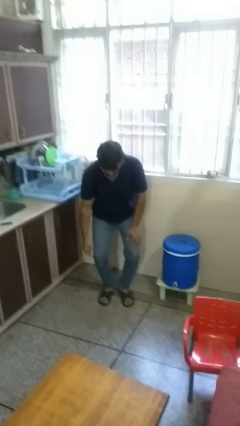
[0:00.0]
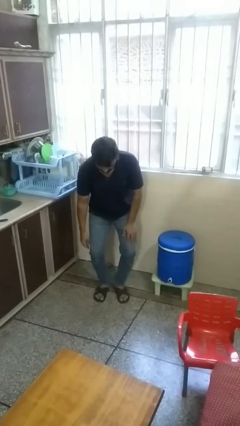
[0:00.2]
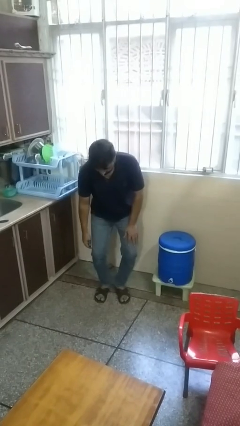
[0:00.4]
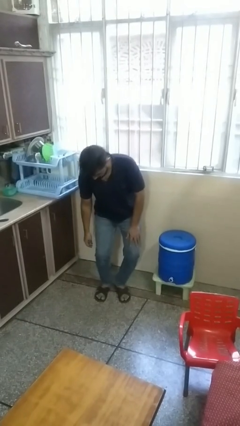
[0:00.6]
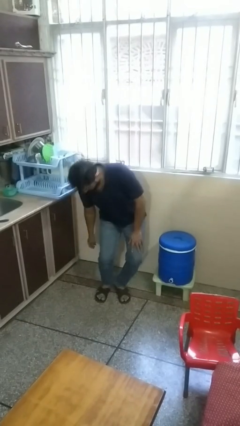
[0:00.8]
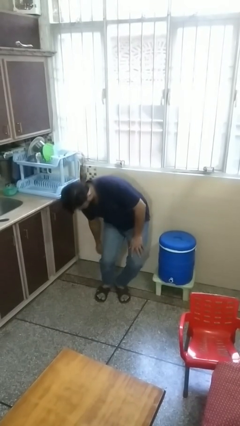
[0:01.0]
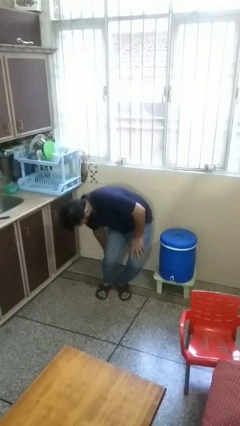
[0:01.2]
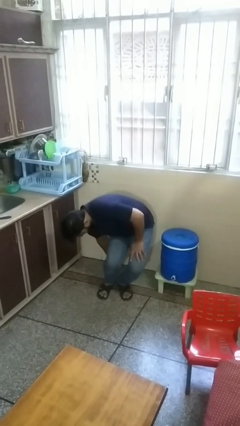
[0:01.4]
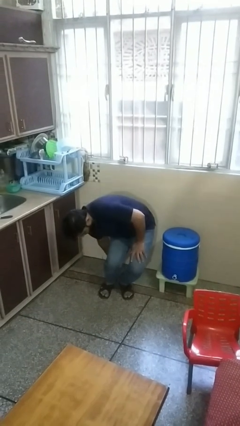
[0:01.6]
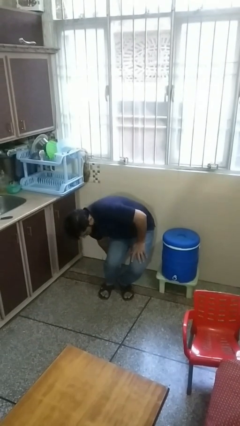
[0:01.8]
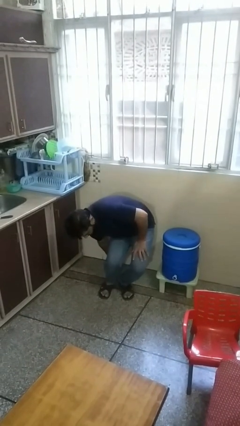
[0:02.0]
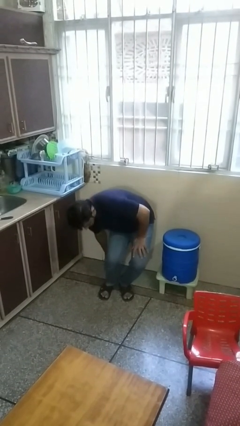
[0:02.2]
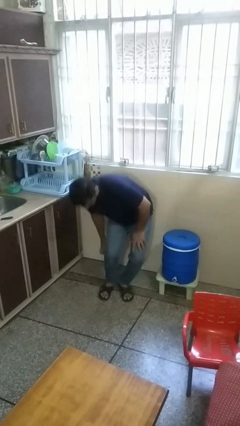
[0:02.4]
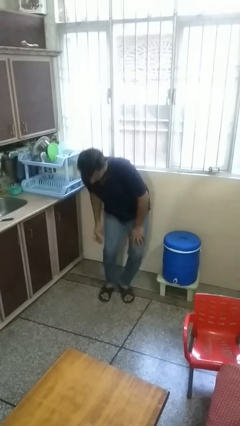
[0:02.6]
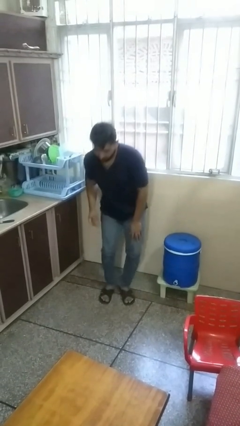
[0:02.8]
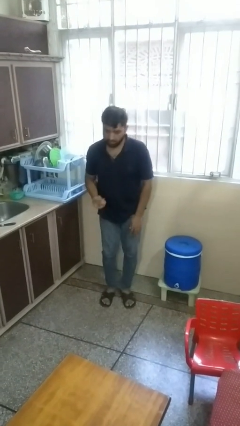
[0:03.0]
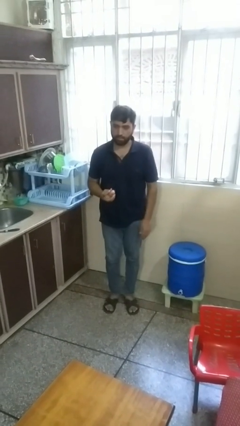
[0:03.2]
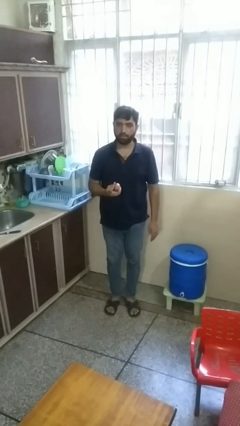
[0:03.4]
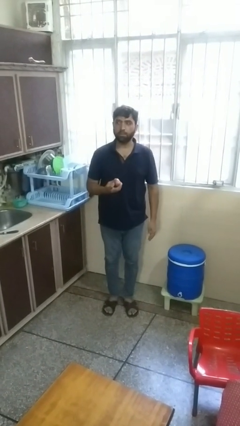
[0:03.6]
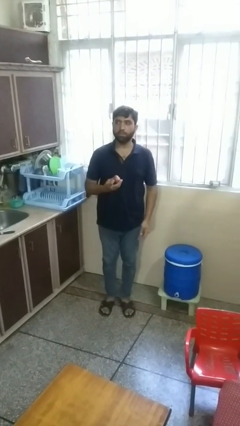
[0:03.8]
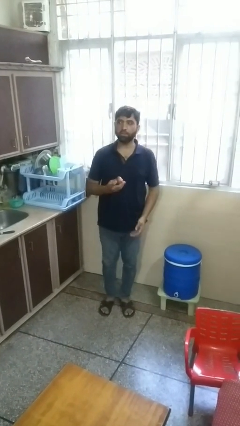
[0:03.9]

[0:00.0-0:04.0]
person picks up object from floor

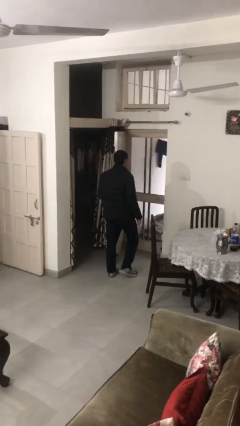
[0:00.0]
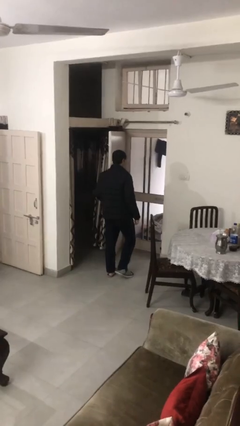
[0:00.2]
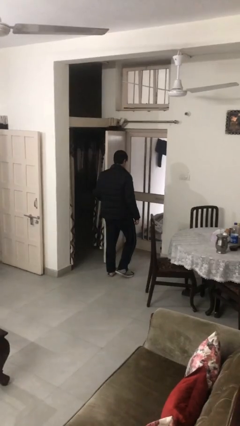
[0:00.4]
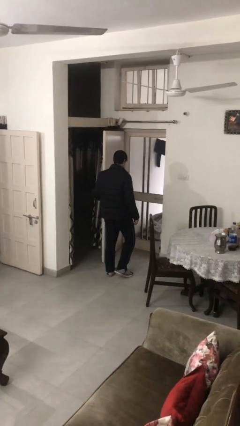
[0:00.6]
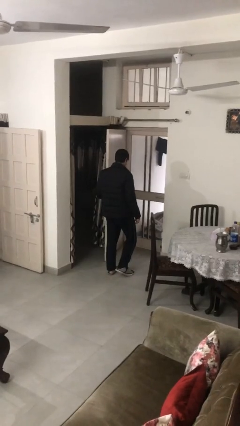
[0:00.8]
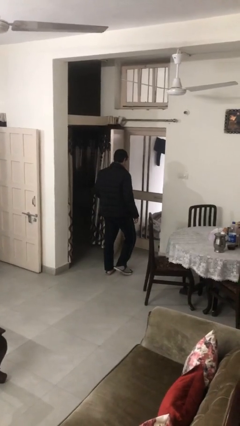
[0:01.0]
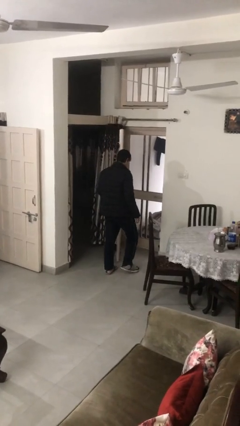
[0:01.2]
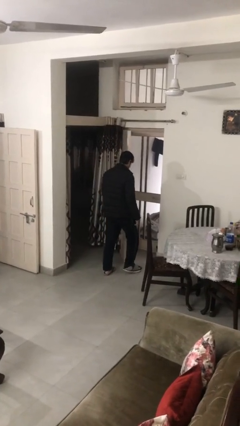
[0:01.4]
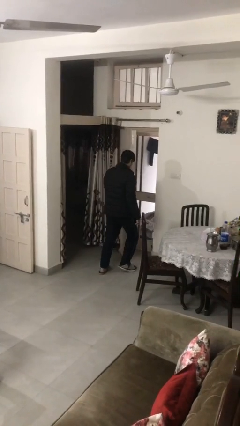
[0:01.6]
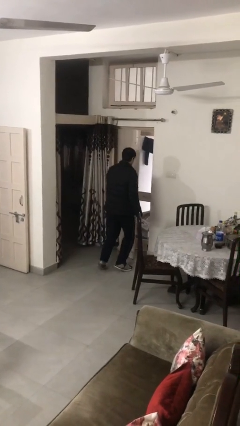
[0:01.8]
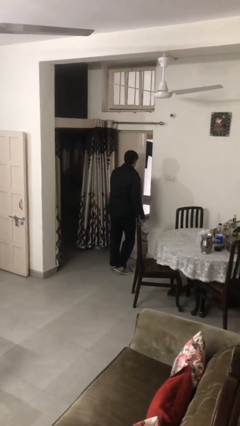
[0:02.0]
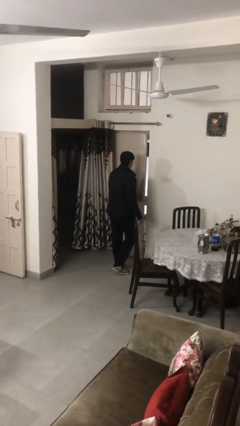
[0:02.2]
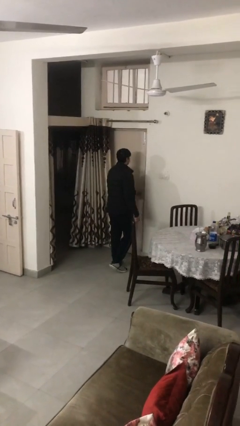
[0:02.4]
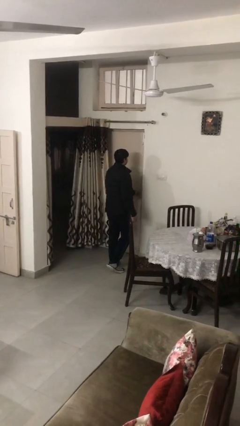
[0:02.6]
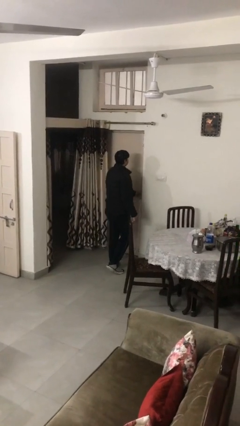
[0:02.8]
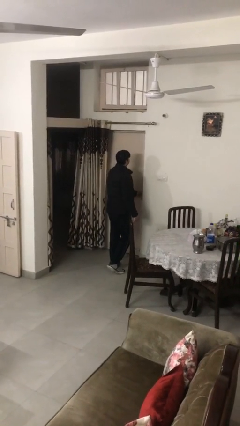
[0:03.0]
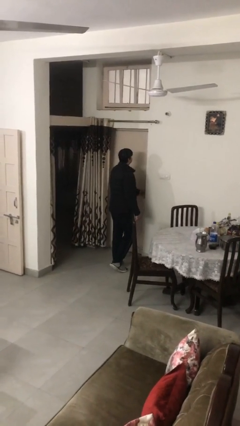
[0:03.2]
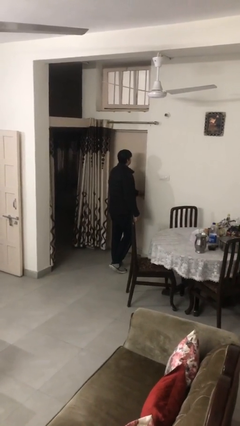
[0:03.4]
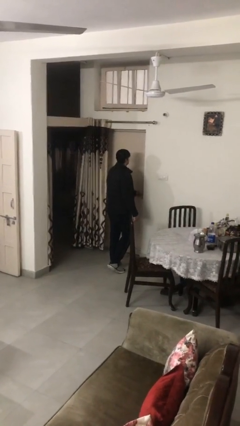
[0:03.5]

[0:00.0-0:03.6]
person closes facility door

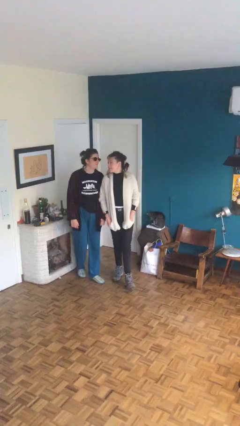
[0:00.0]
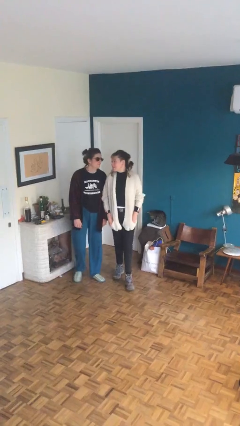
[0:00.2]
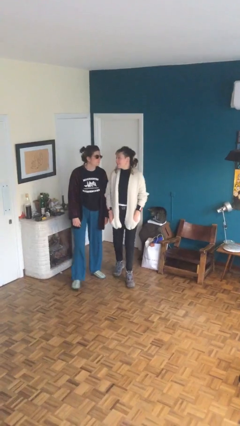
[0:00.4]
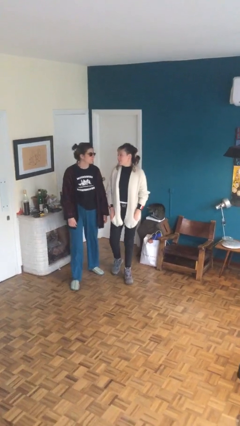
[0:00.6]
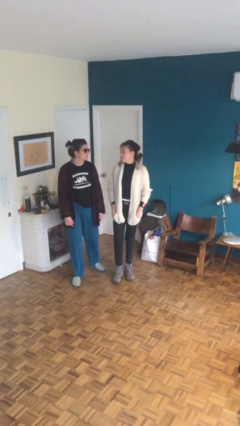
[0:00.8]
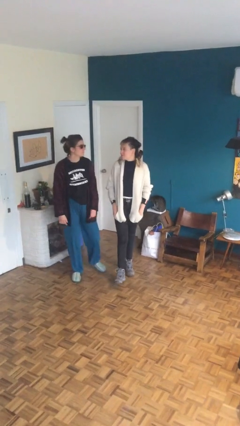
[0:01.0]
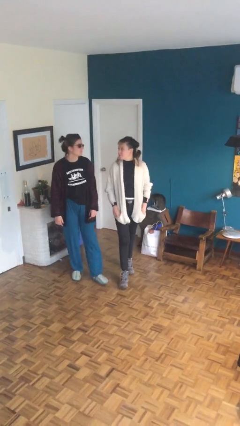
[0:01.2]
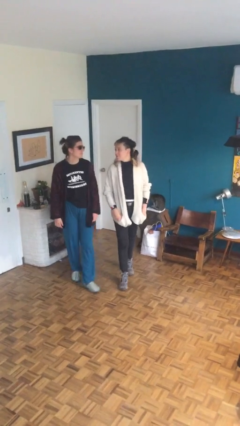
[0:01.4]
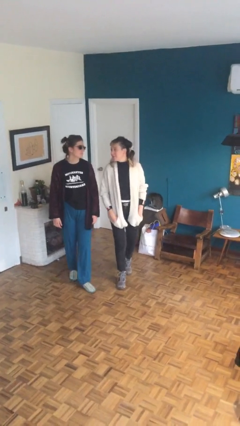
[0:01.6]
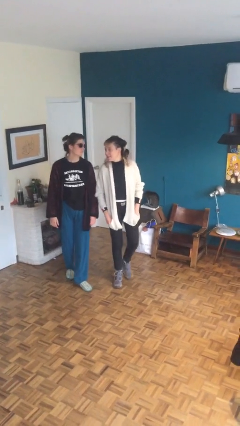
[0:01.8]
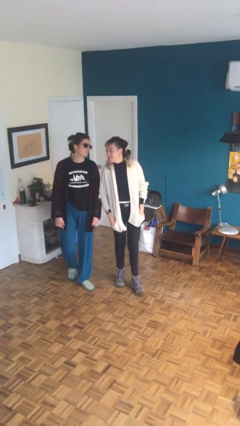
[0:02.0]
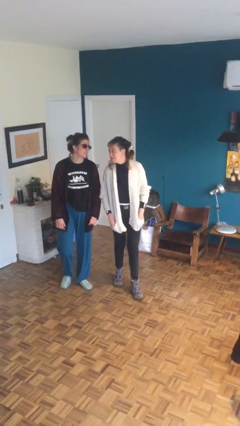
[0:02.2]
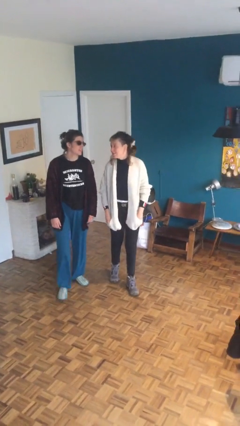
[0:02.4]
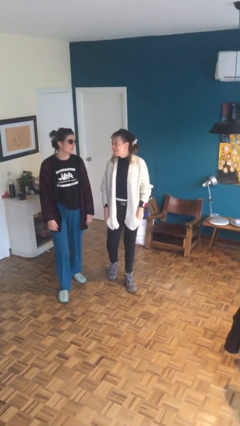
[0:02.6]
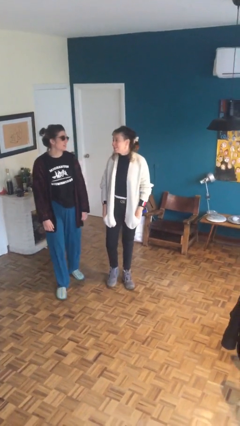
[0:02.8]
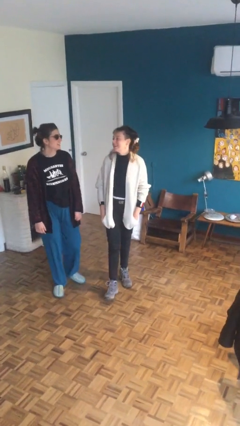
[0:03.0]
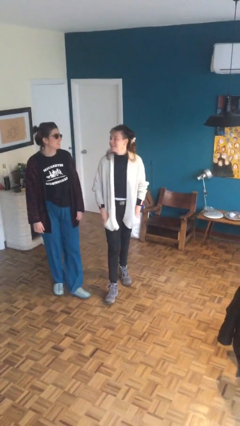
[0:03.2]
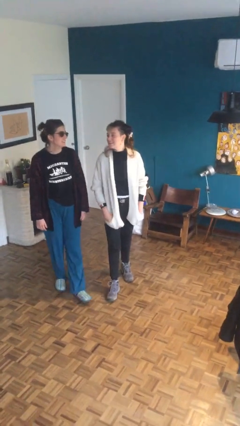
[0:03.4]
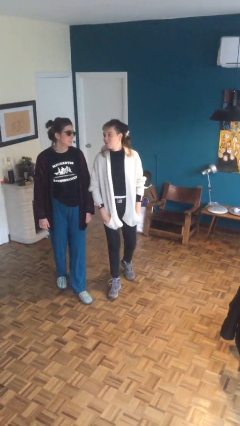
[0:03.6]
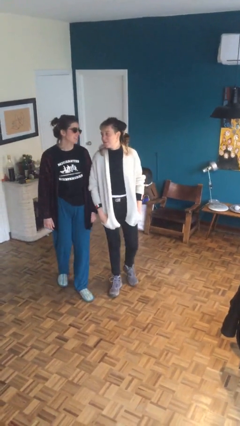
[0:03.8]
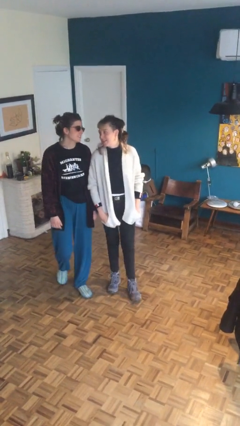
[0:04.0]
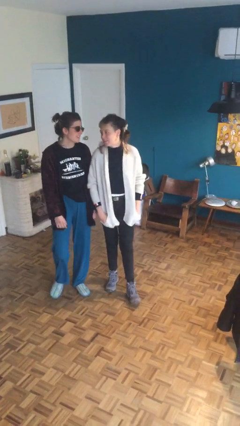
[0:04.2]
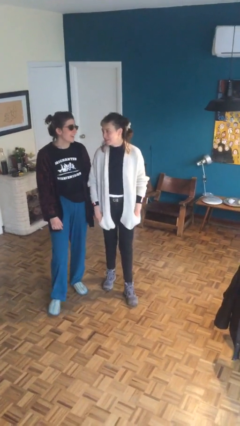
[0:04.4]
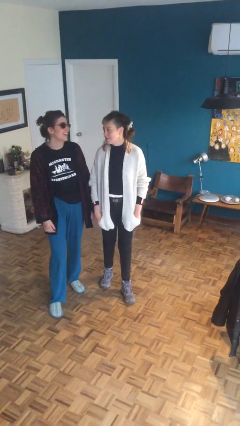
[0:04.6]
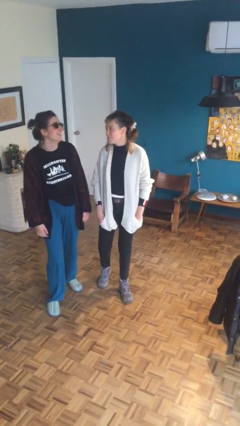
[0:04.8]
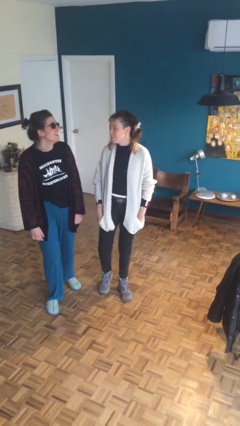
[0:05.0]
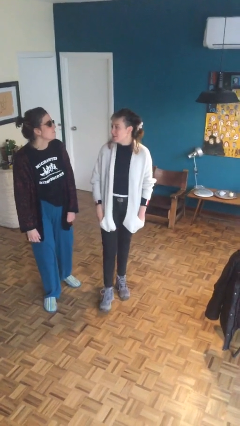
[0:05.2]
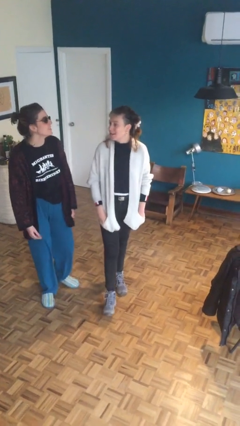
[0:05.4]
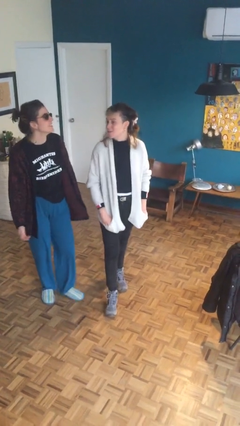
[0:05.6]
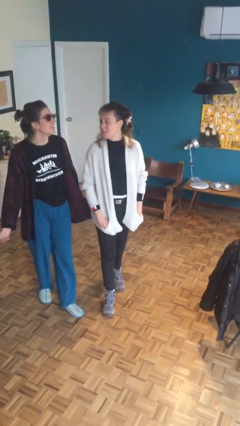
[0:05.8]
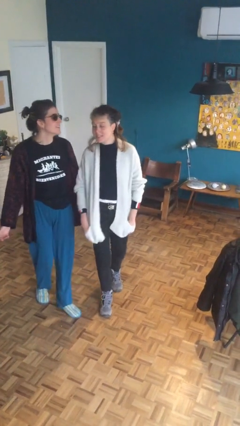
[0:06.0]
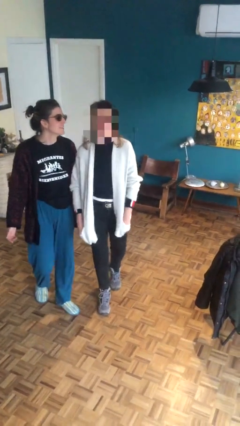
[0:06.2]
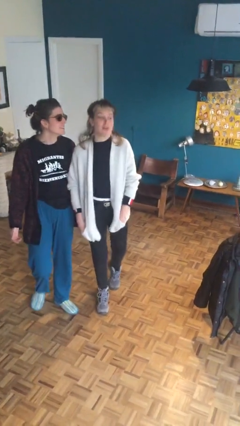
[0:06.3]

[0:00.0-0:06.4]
person talks to person

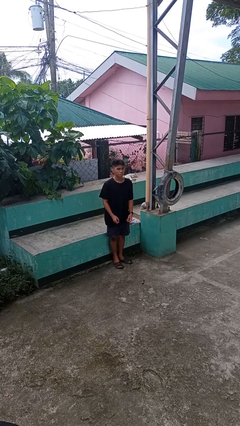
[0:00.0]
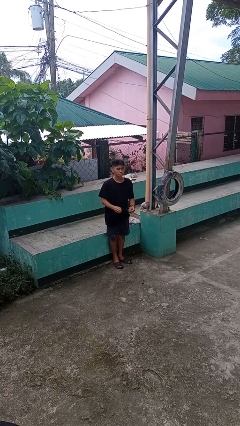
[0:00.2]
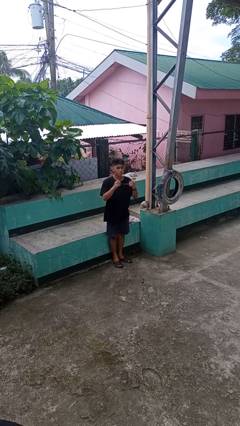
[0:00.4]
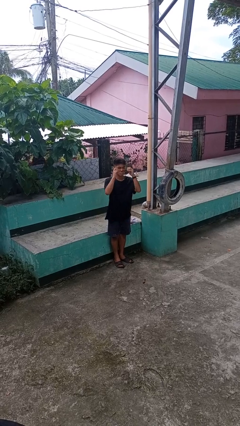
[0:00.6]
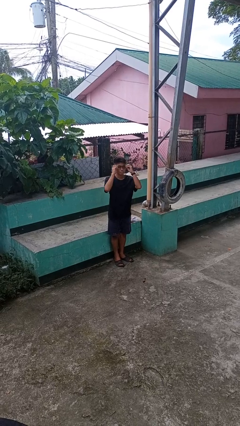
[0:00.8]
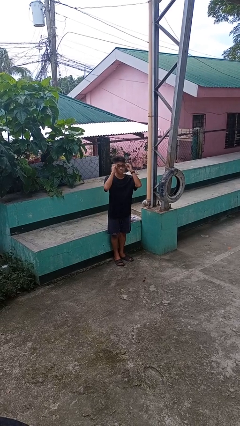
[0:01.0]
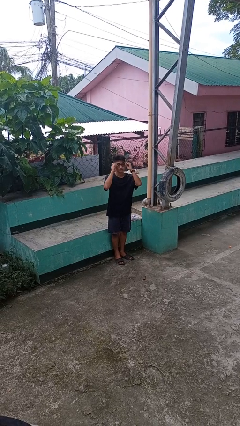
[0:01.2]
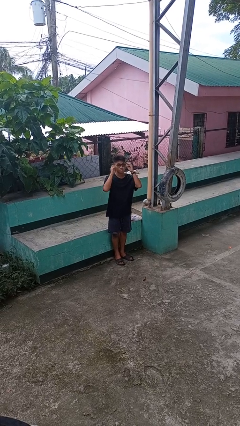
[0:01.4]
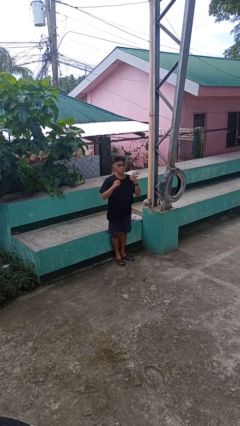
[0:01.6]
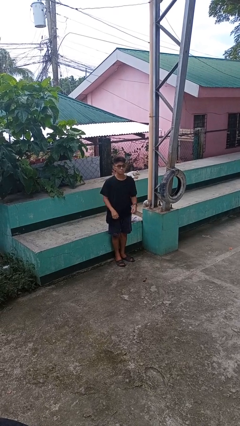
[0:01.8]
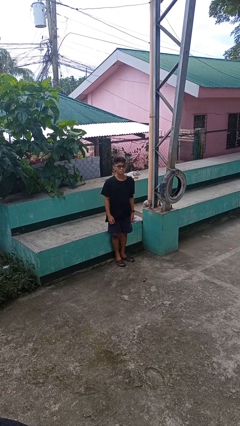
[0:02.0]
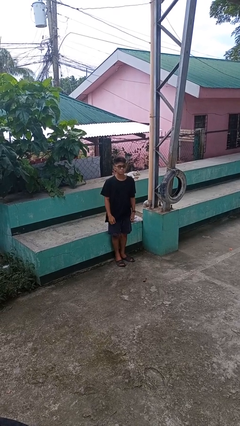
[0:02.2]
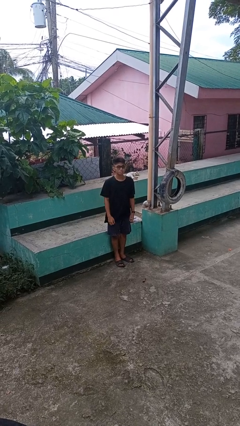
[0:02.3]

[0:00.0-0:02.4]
person puts on glasses

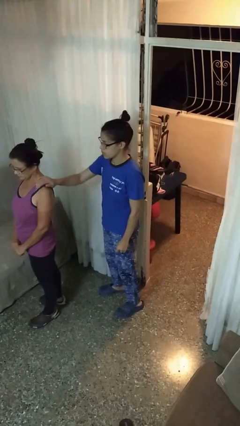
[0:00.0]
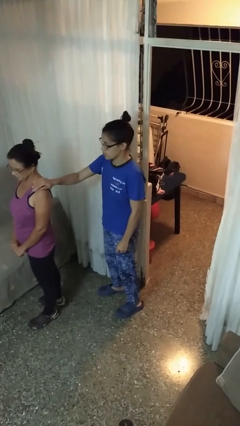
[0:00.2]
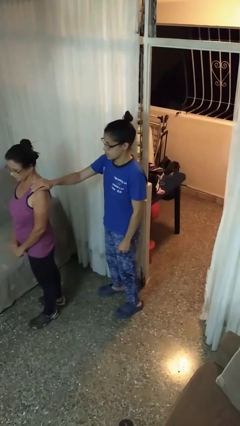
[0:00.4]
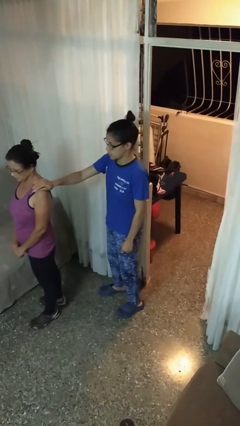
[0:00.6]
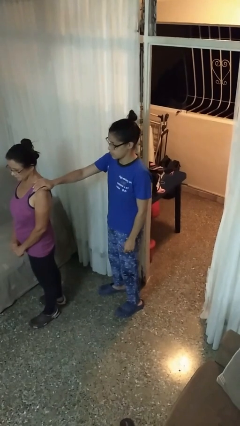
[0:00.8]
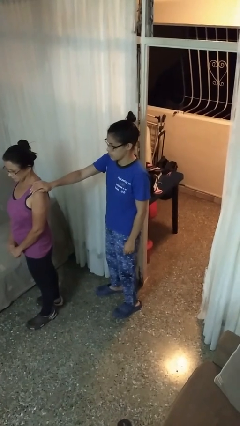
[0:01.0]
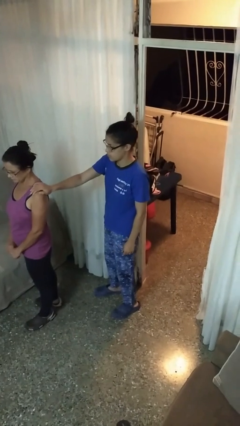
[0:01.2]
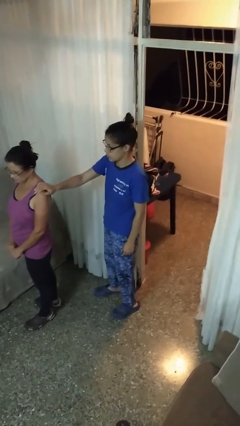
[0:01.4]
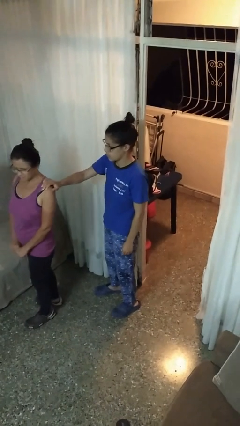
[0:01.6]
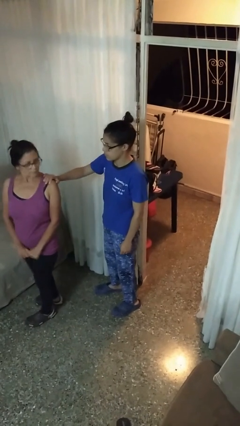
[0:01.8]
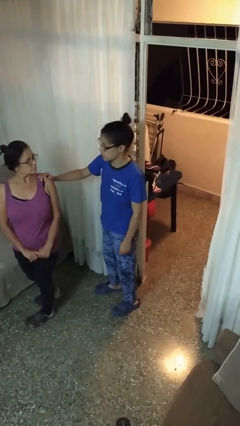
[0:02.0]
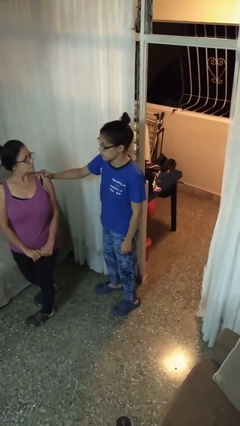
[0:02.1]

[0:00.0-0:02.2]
person grabs person by shoulder
